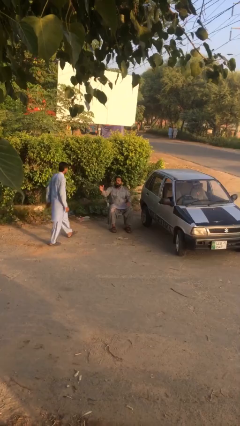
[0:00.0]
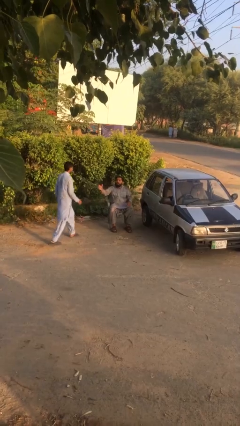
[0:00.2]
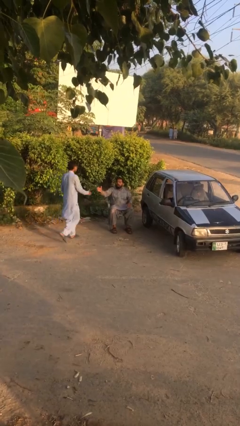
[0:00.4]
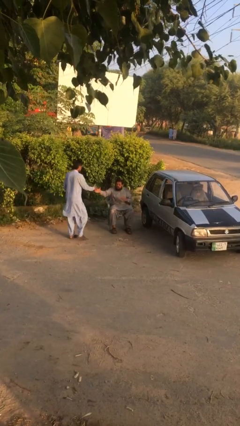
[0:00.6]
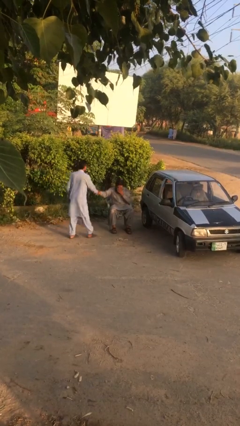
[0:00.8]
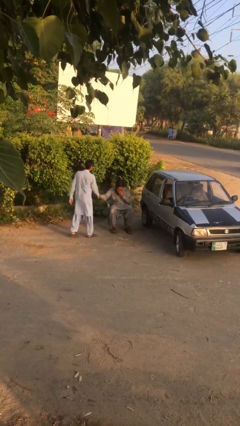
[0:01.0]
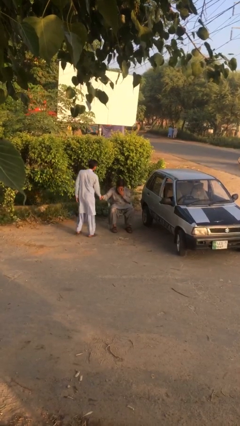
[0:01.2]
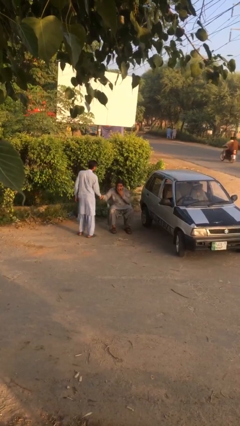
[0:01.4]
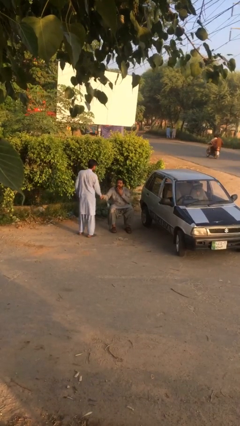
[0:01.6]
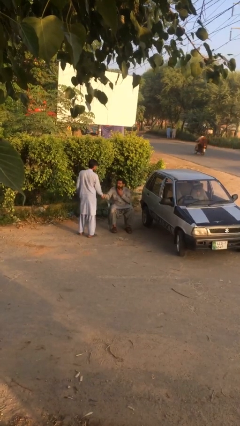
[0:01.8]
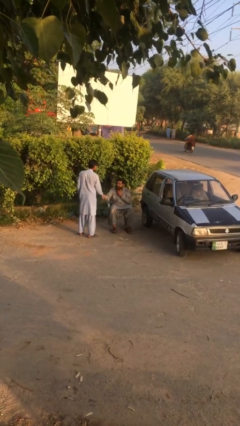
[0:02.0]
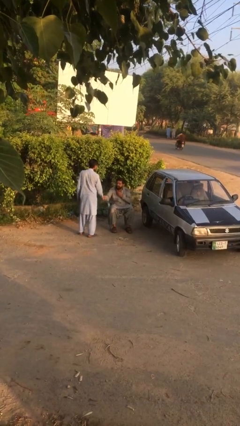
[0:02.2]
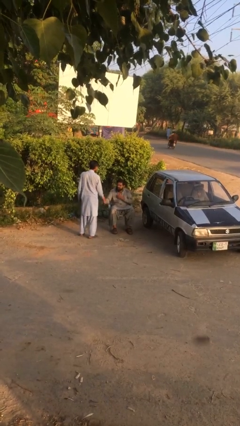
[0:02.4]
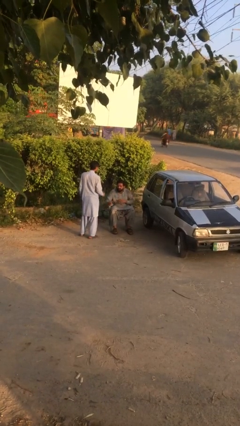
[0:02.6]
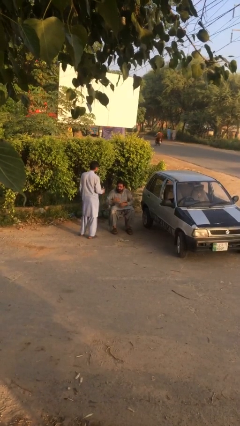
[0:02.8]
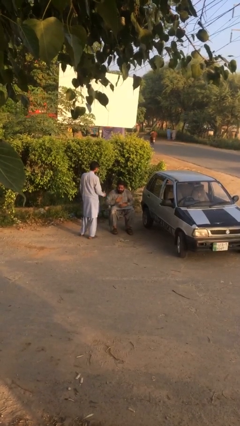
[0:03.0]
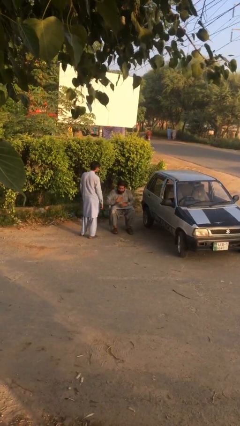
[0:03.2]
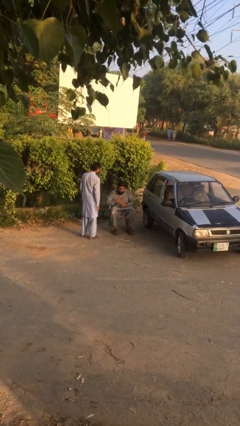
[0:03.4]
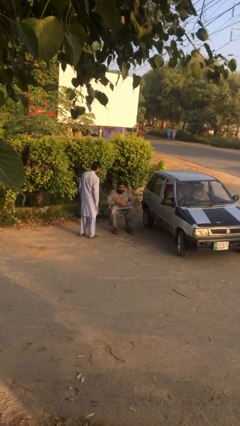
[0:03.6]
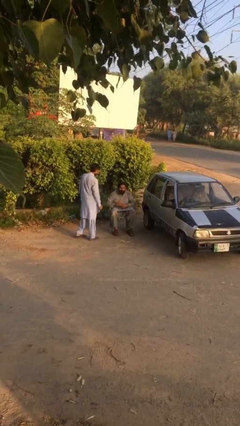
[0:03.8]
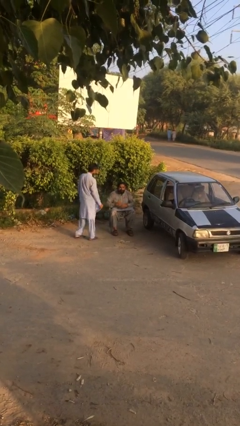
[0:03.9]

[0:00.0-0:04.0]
person shakes hand

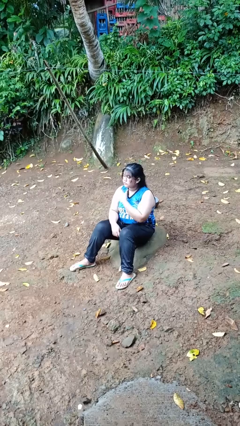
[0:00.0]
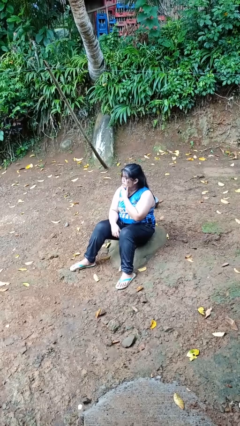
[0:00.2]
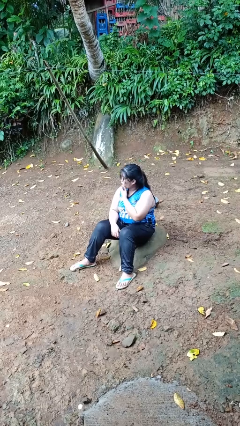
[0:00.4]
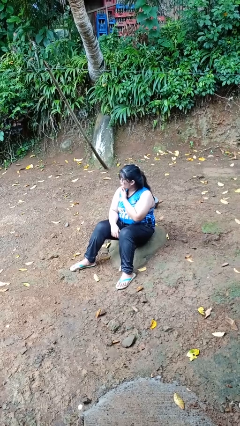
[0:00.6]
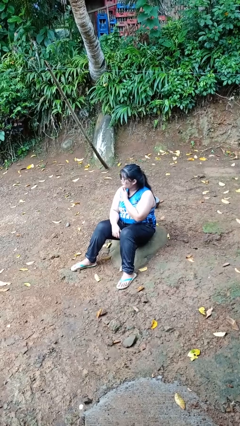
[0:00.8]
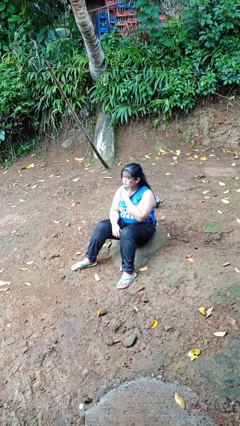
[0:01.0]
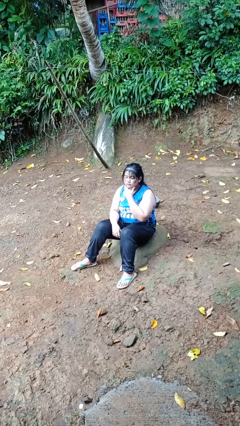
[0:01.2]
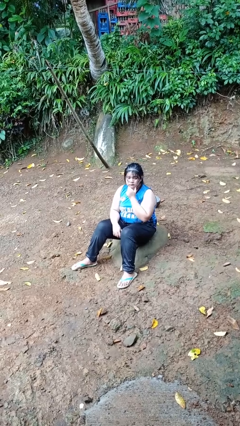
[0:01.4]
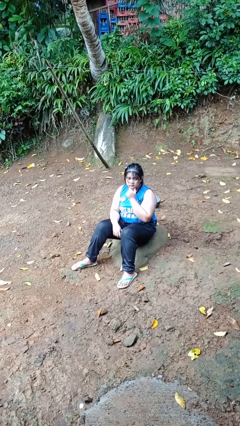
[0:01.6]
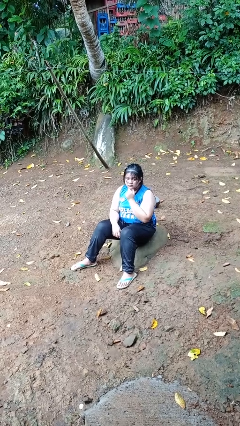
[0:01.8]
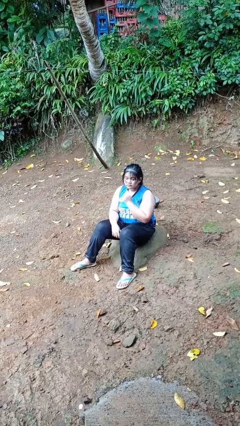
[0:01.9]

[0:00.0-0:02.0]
person strokes chin

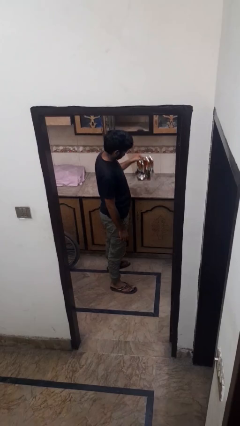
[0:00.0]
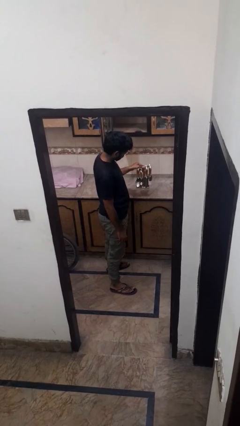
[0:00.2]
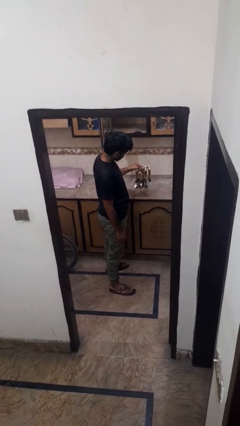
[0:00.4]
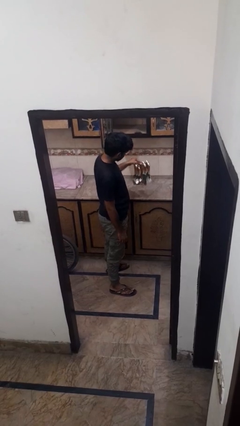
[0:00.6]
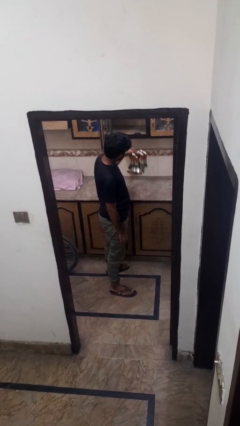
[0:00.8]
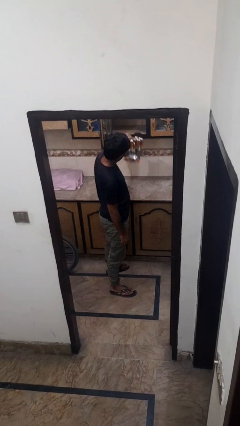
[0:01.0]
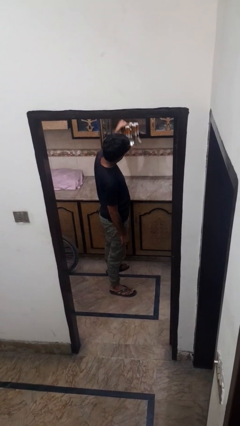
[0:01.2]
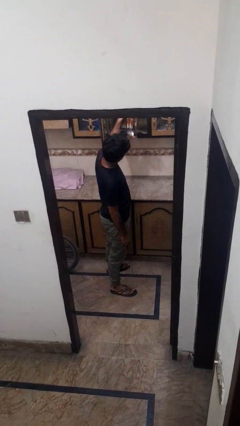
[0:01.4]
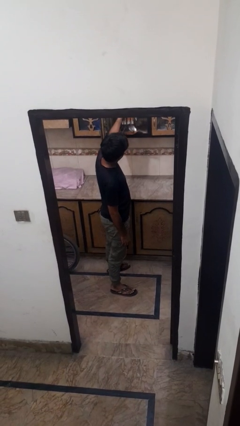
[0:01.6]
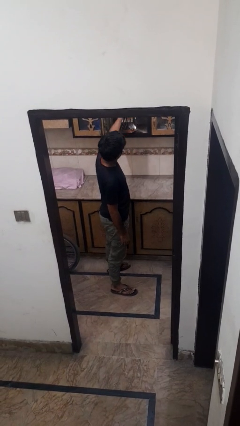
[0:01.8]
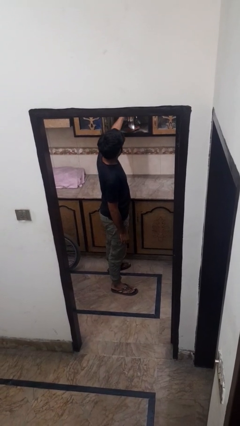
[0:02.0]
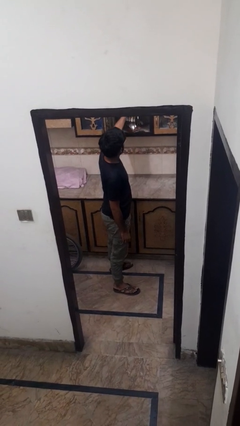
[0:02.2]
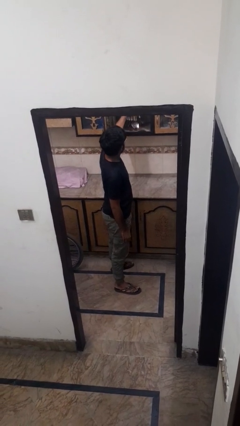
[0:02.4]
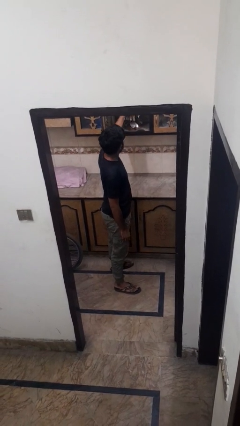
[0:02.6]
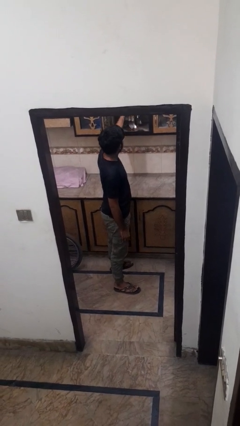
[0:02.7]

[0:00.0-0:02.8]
person puts down object into cabinet

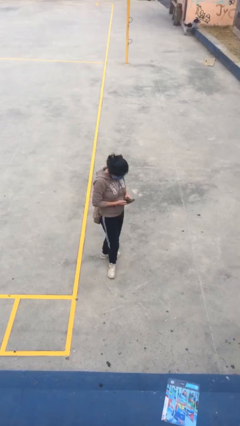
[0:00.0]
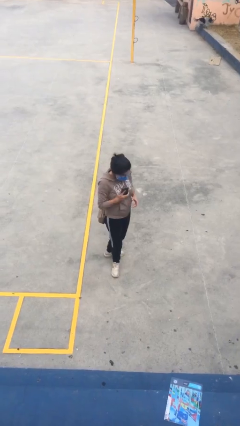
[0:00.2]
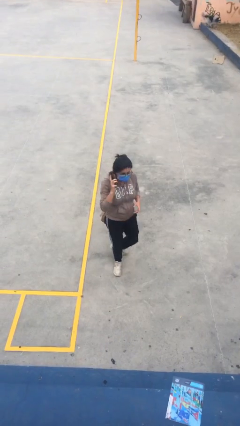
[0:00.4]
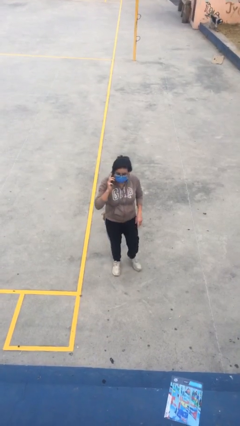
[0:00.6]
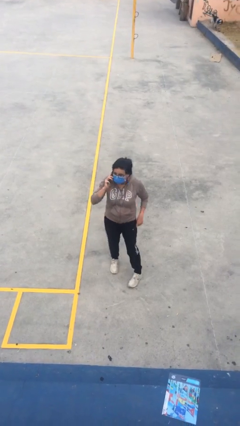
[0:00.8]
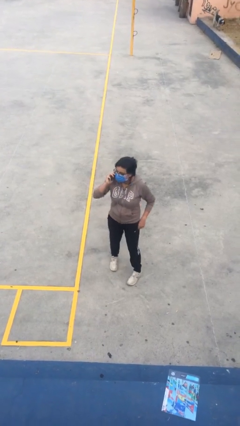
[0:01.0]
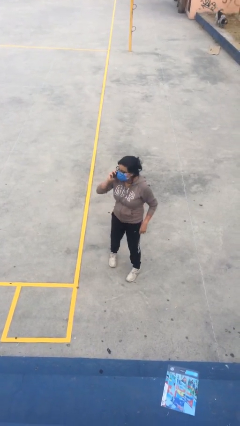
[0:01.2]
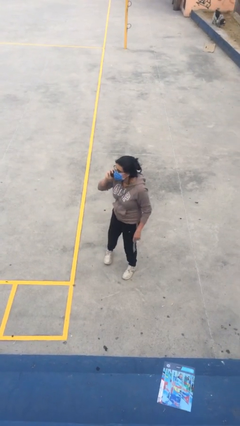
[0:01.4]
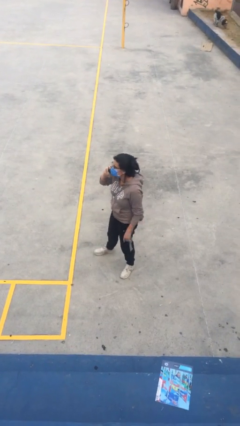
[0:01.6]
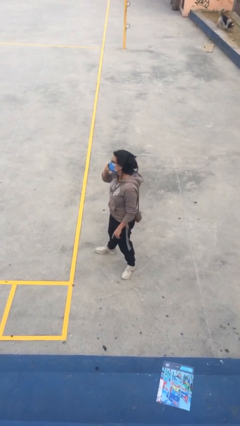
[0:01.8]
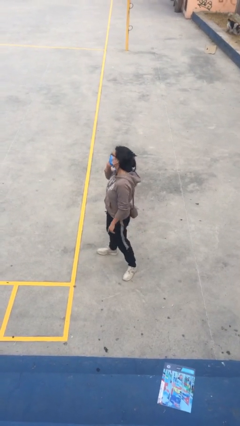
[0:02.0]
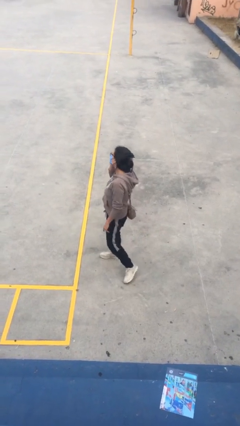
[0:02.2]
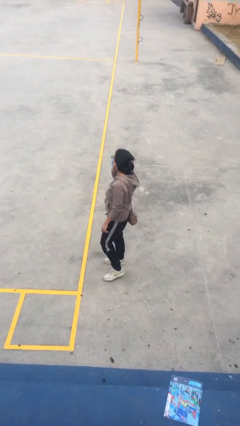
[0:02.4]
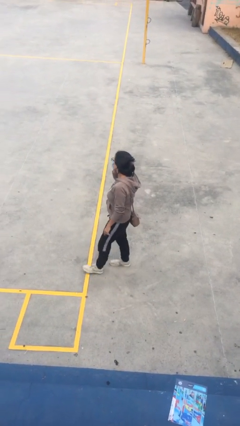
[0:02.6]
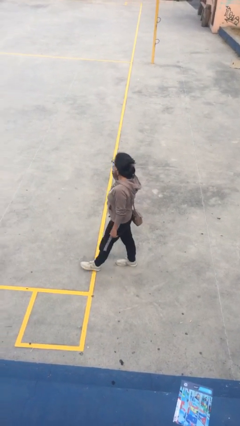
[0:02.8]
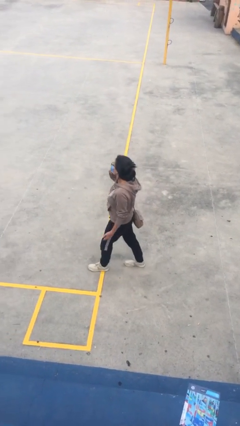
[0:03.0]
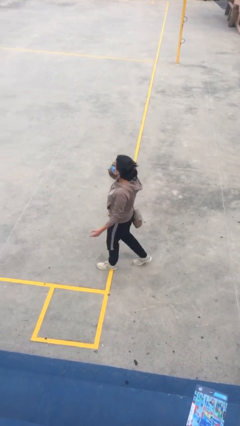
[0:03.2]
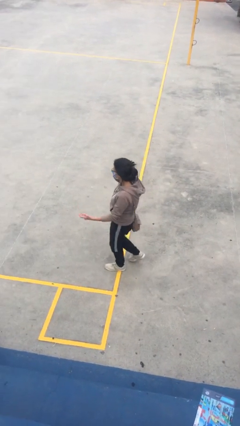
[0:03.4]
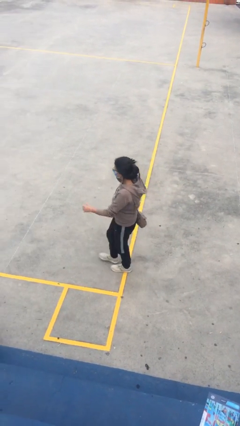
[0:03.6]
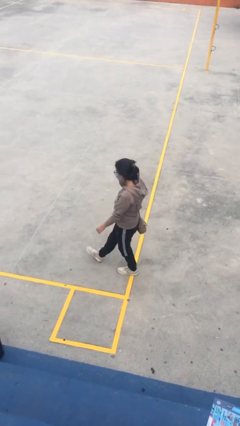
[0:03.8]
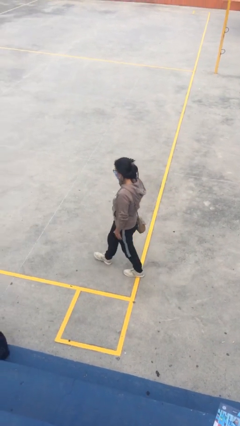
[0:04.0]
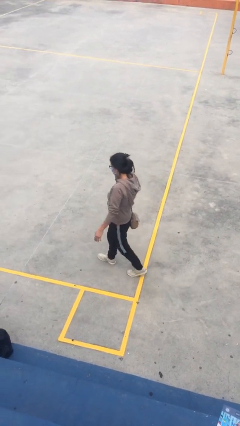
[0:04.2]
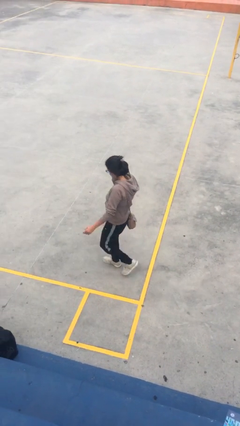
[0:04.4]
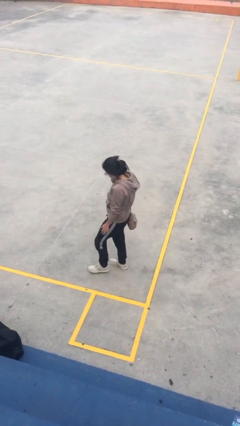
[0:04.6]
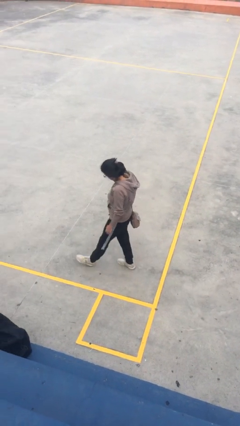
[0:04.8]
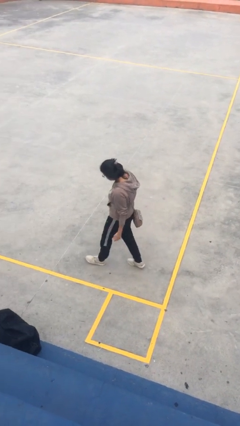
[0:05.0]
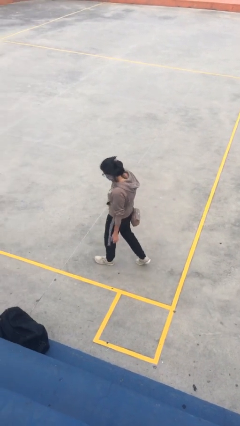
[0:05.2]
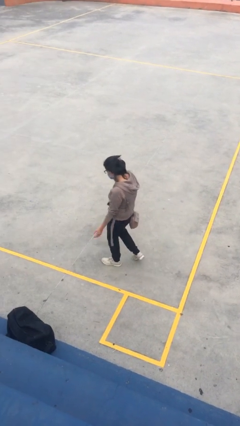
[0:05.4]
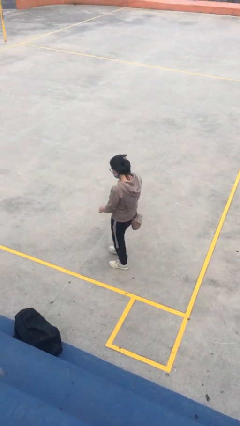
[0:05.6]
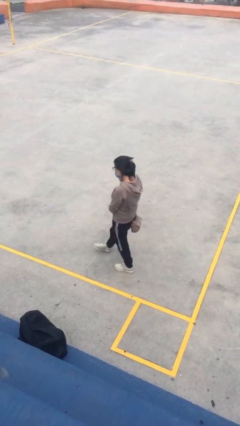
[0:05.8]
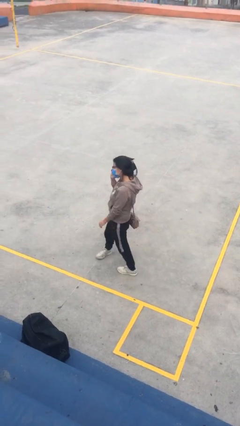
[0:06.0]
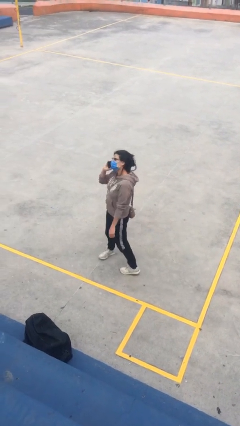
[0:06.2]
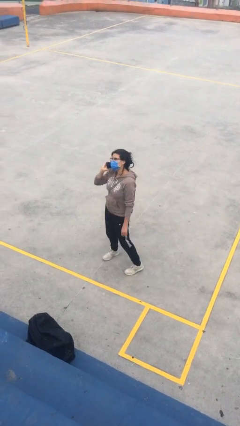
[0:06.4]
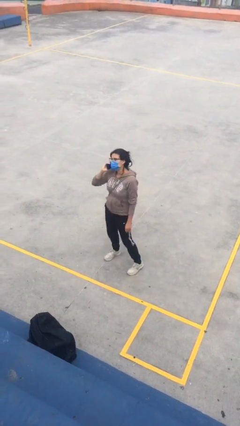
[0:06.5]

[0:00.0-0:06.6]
person talks on phone

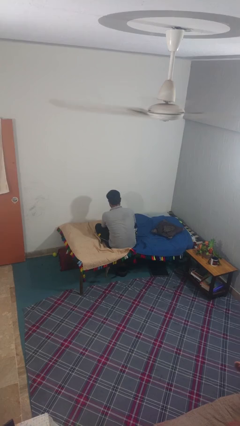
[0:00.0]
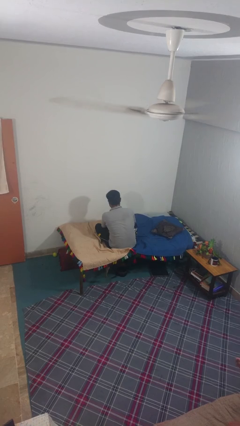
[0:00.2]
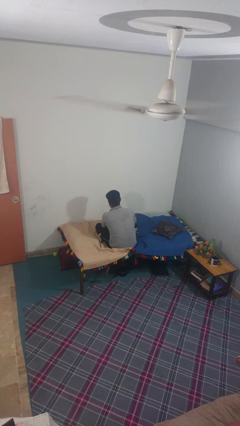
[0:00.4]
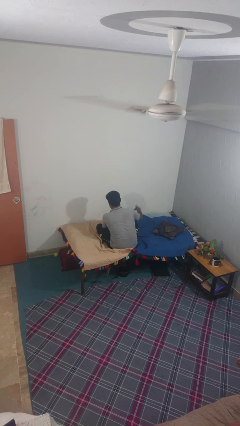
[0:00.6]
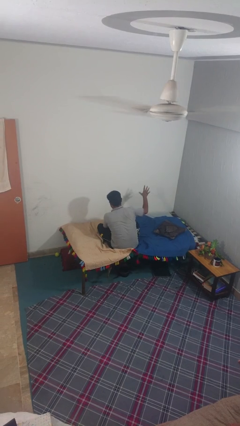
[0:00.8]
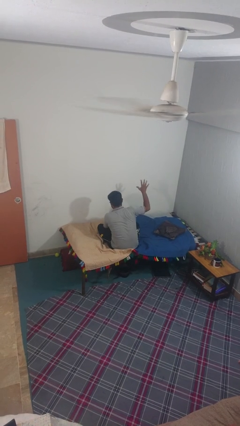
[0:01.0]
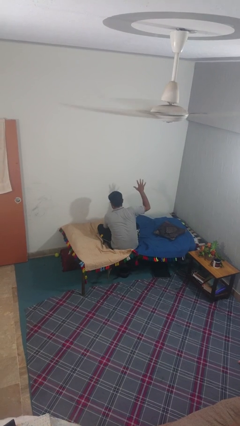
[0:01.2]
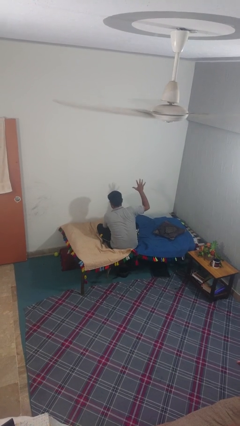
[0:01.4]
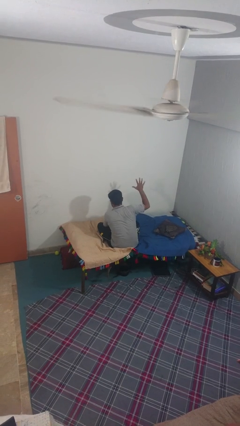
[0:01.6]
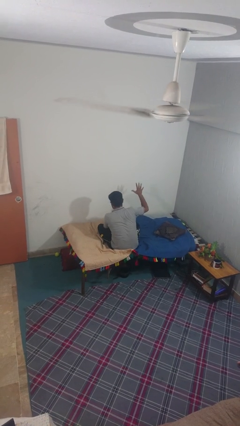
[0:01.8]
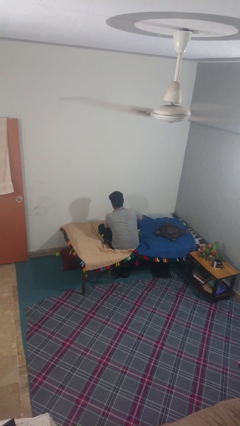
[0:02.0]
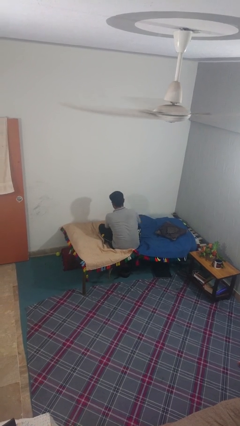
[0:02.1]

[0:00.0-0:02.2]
person gestures number five

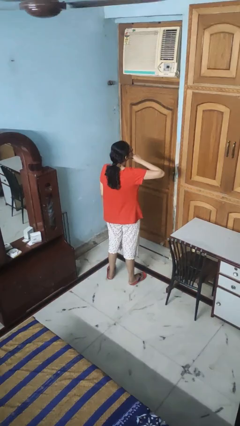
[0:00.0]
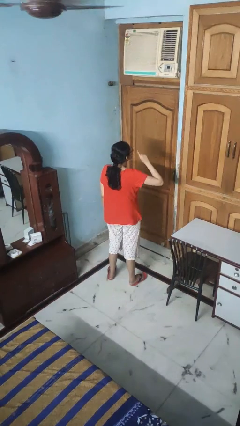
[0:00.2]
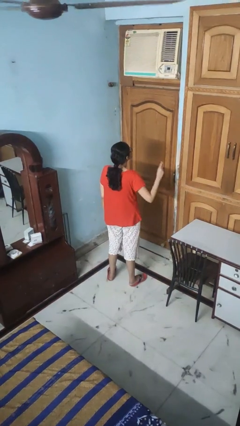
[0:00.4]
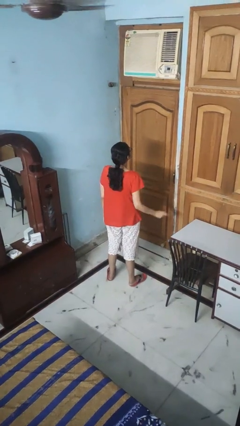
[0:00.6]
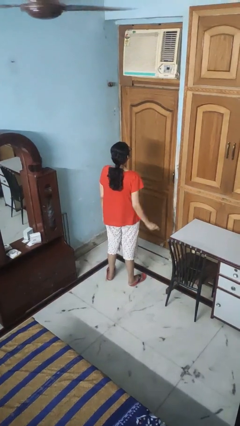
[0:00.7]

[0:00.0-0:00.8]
person gestures be quiet
